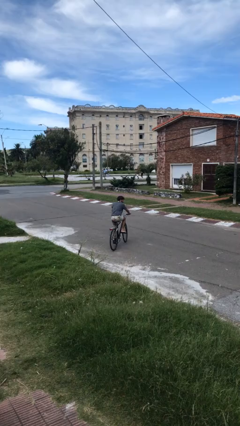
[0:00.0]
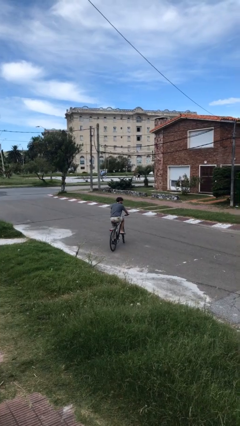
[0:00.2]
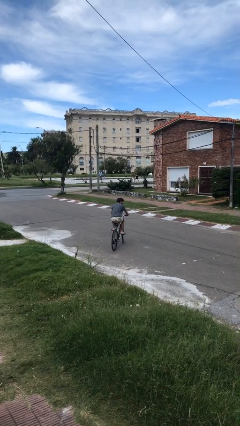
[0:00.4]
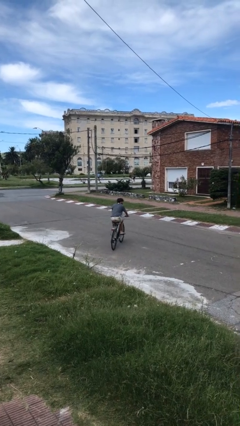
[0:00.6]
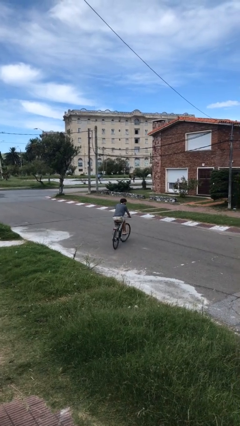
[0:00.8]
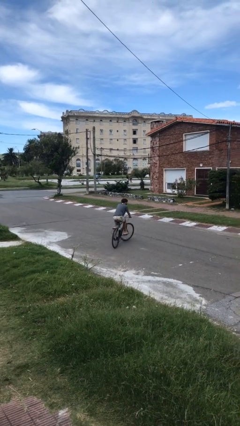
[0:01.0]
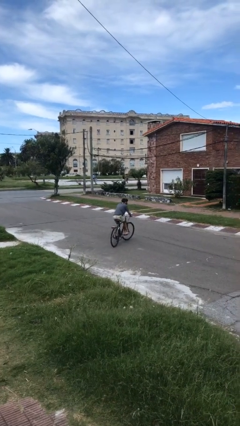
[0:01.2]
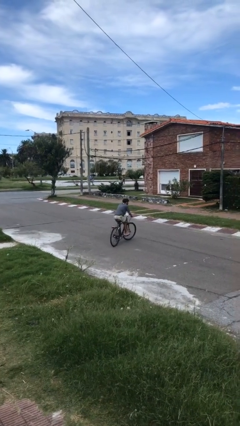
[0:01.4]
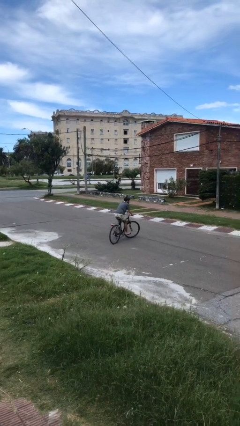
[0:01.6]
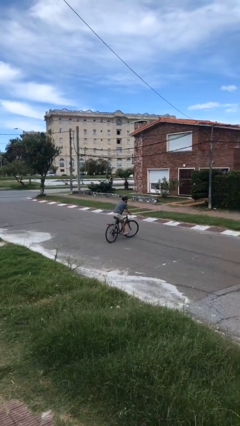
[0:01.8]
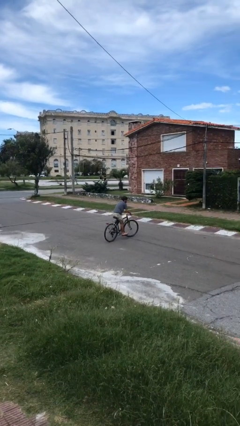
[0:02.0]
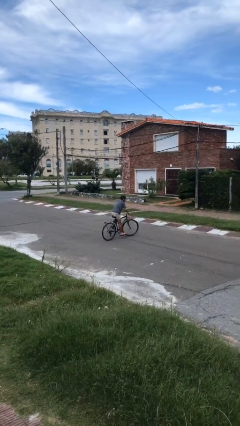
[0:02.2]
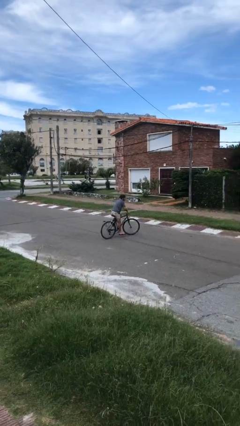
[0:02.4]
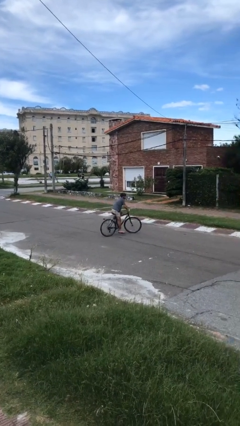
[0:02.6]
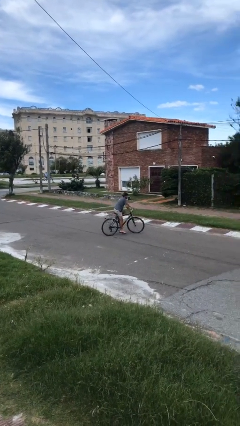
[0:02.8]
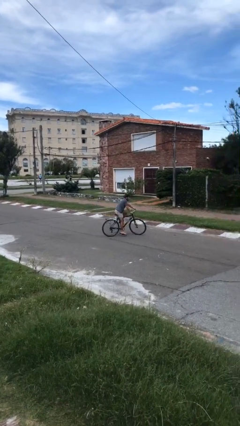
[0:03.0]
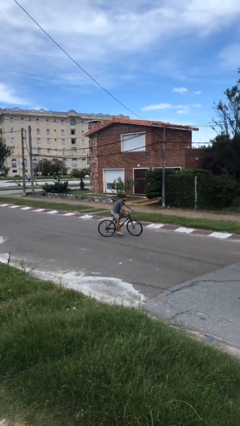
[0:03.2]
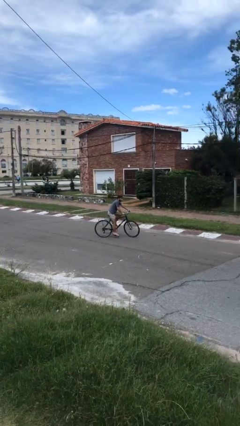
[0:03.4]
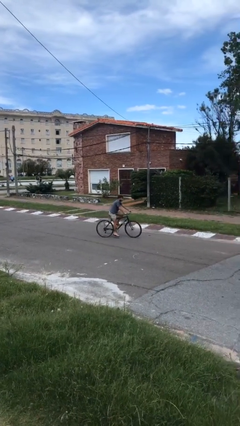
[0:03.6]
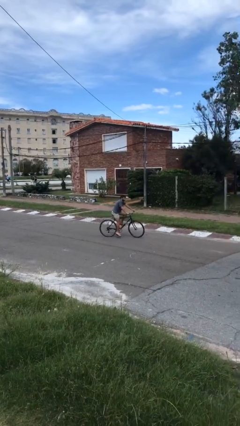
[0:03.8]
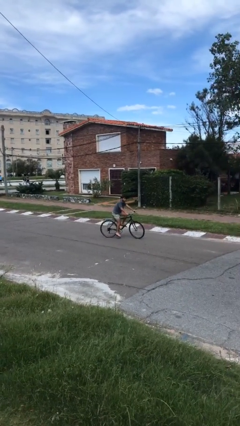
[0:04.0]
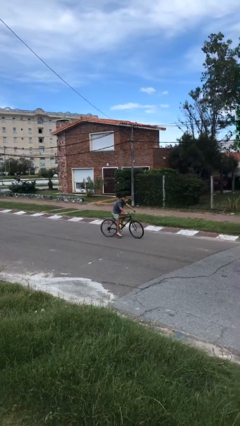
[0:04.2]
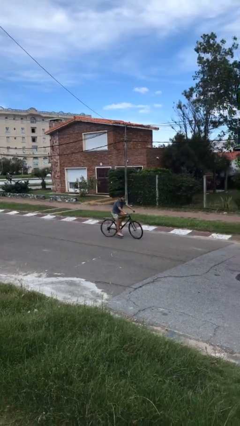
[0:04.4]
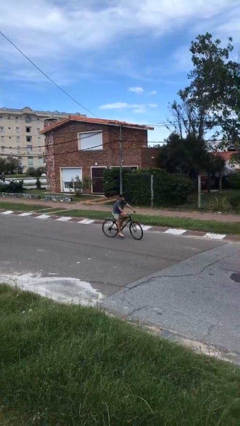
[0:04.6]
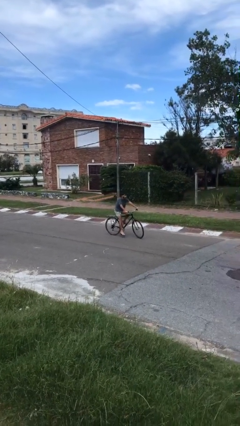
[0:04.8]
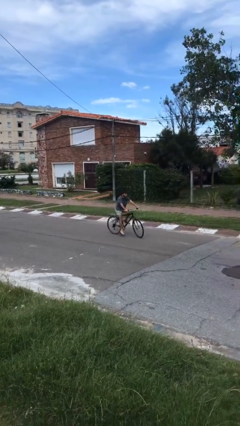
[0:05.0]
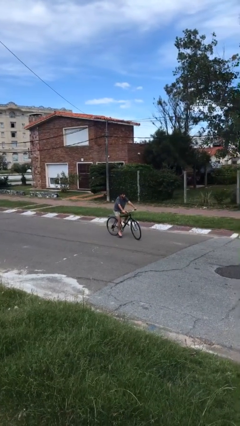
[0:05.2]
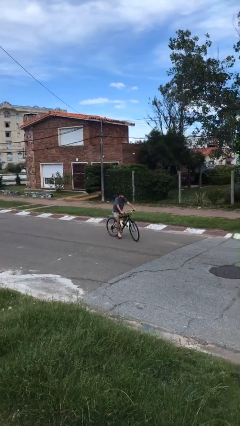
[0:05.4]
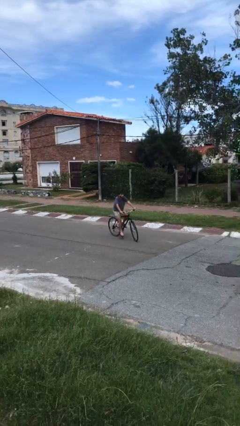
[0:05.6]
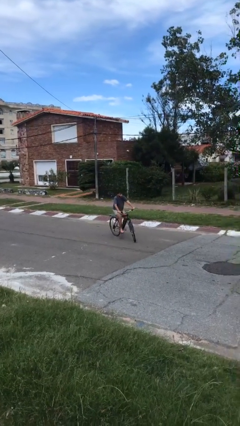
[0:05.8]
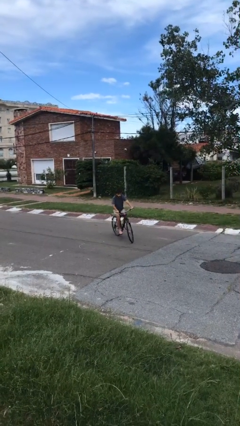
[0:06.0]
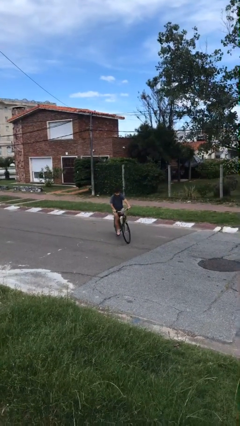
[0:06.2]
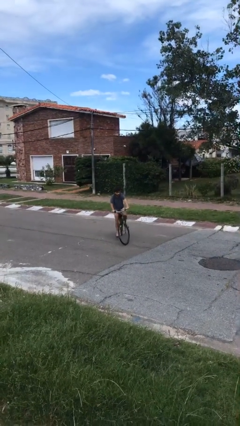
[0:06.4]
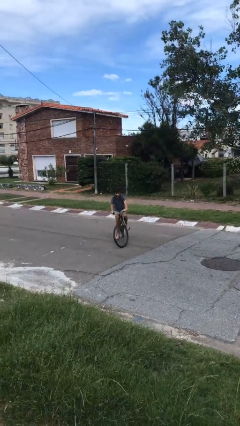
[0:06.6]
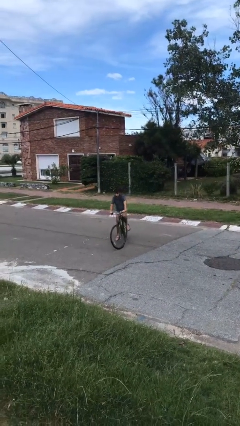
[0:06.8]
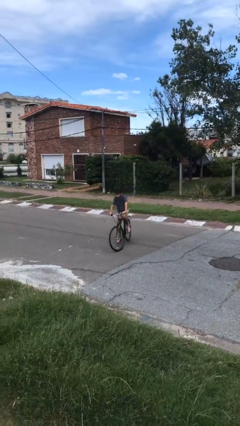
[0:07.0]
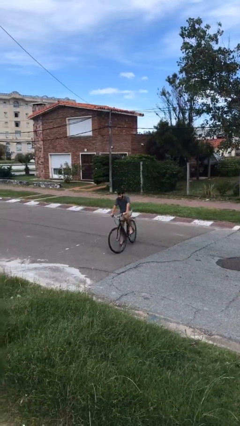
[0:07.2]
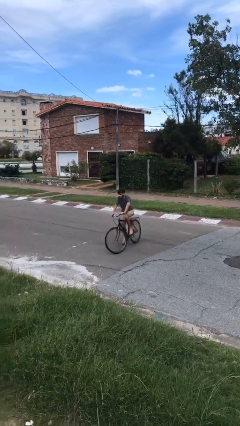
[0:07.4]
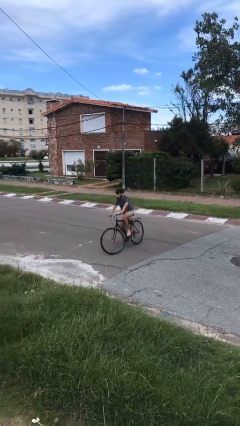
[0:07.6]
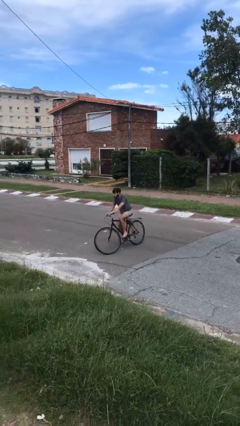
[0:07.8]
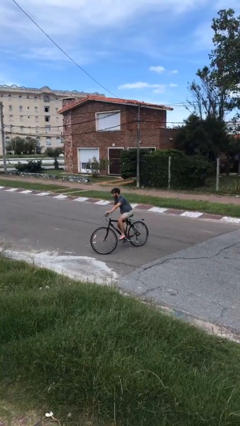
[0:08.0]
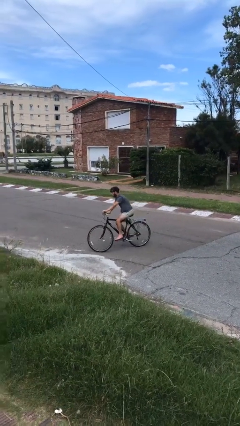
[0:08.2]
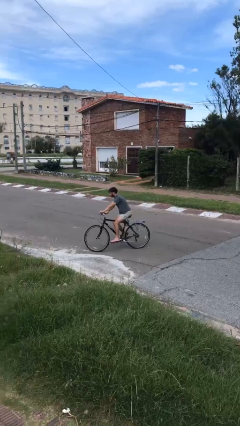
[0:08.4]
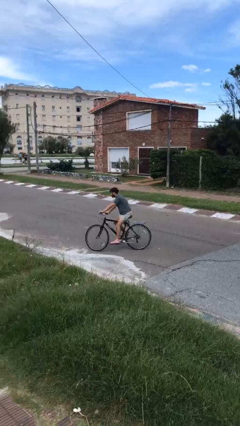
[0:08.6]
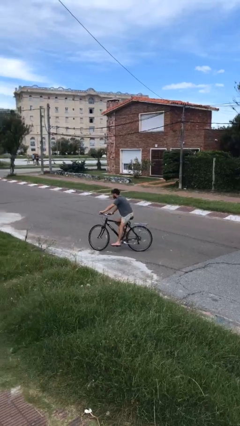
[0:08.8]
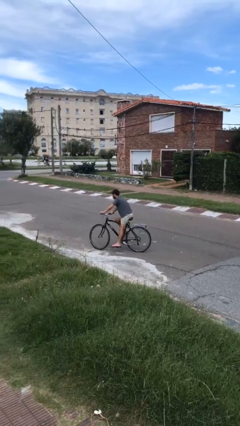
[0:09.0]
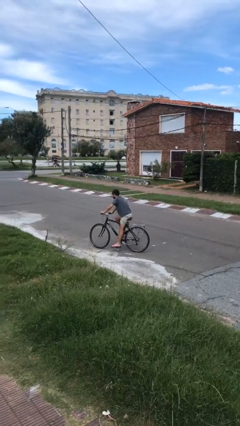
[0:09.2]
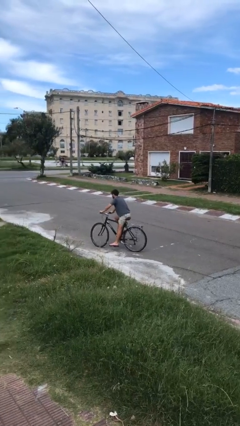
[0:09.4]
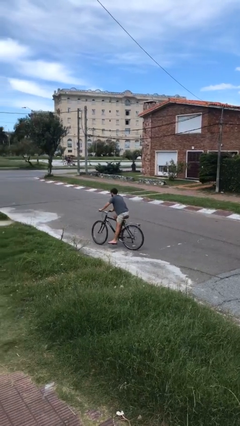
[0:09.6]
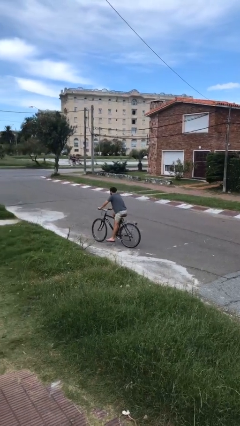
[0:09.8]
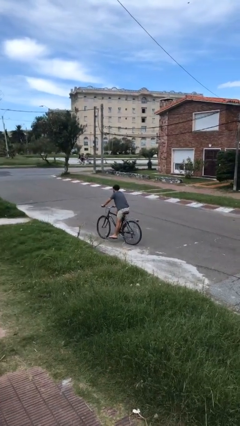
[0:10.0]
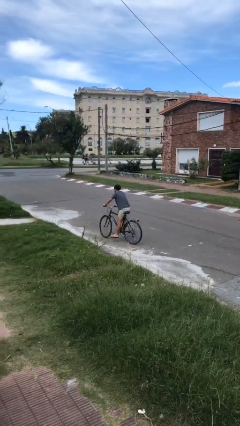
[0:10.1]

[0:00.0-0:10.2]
person rides bicycle

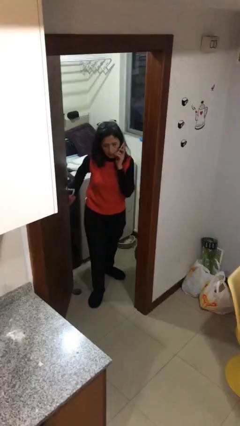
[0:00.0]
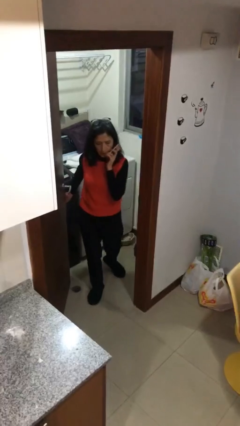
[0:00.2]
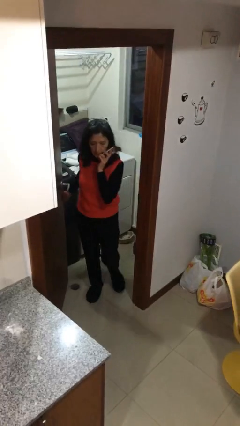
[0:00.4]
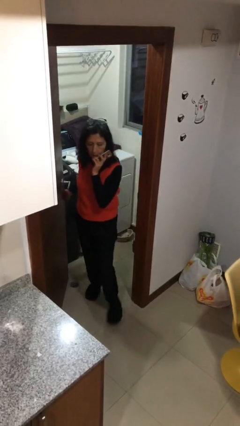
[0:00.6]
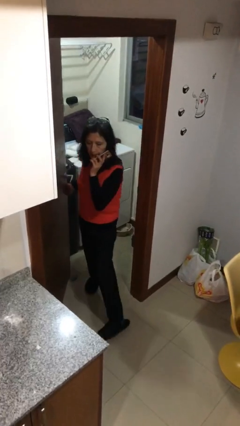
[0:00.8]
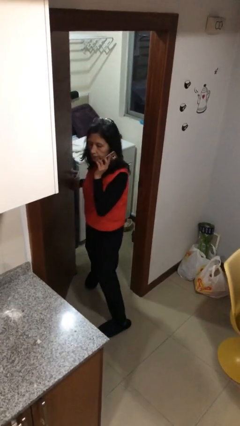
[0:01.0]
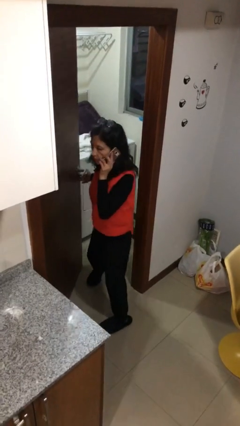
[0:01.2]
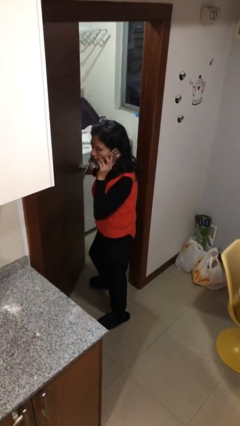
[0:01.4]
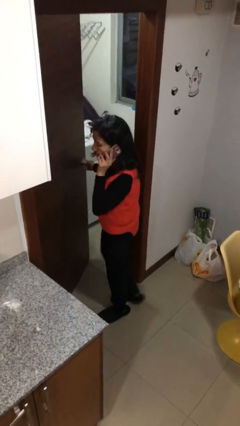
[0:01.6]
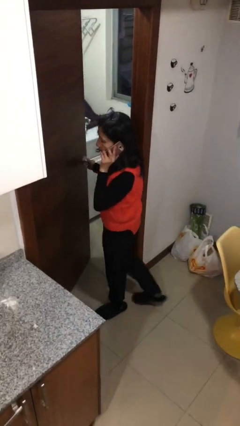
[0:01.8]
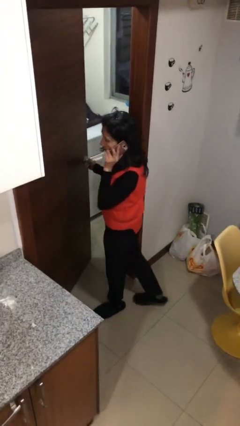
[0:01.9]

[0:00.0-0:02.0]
person enters scene through structure

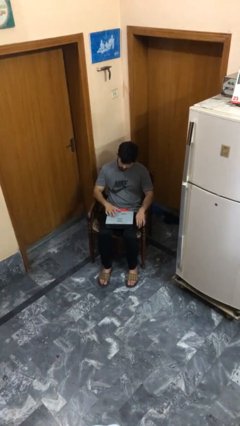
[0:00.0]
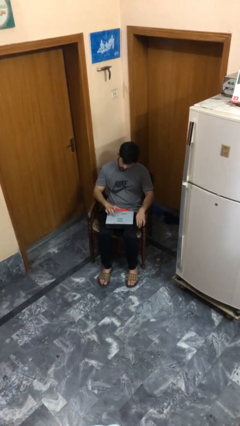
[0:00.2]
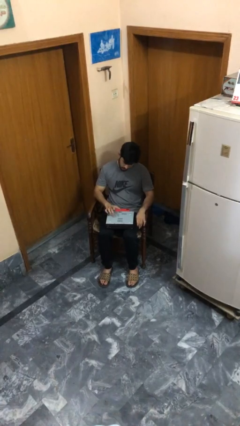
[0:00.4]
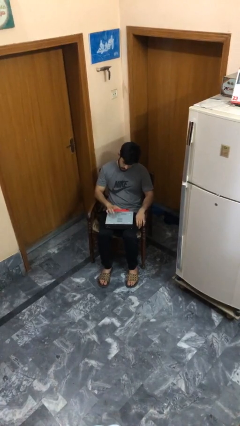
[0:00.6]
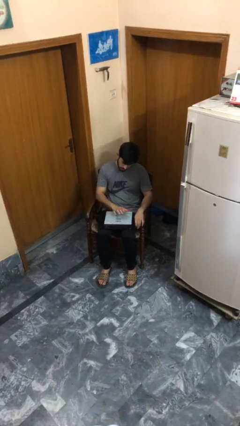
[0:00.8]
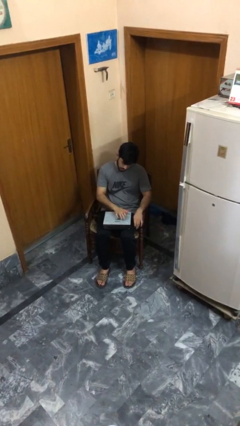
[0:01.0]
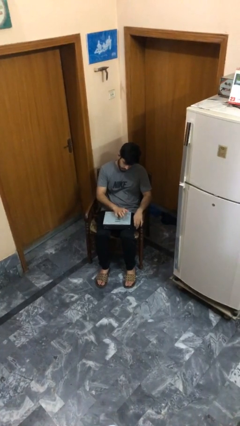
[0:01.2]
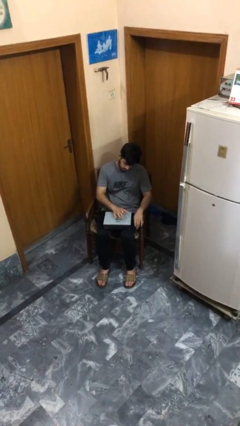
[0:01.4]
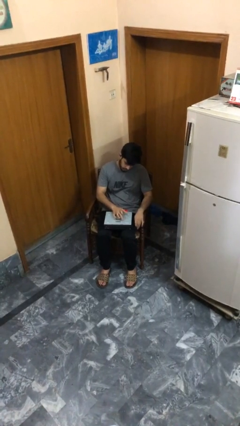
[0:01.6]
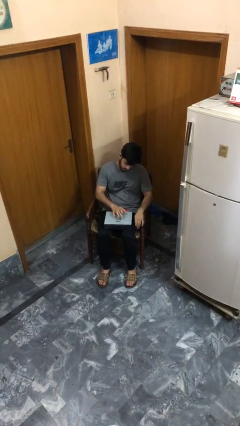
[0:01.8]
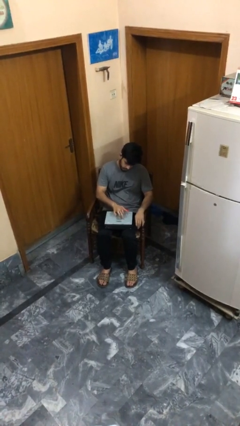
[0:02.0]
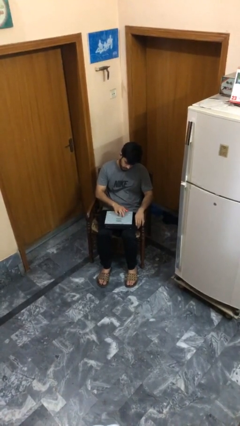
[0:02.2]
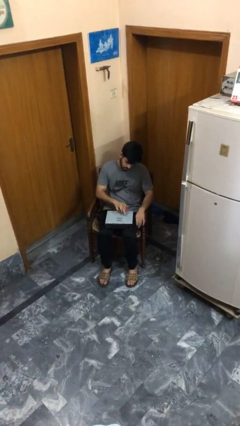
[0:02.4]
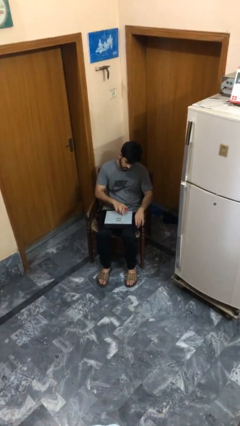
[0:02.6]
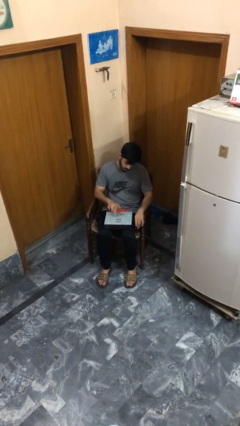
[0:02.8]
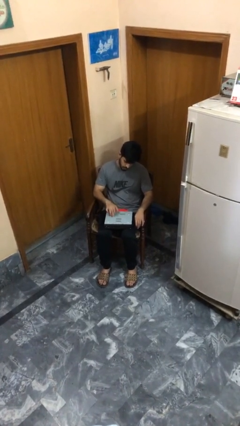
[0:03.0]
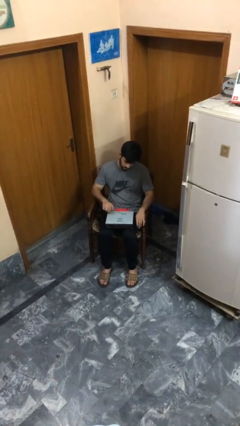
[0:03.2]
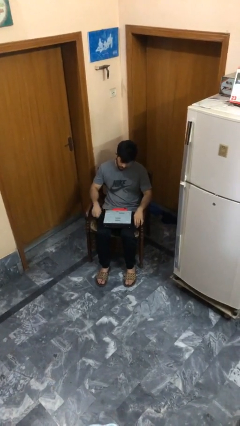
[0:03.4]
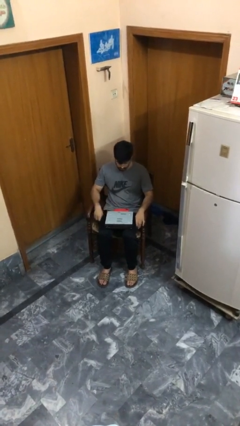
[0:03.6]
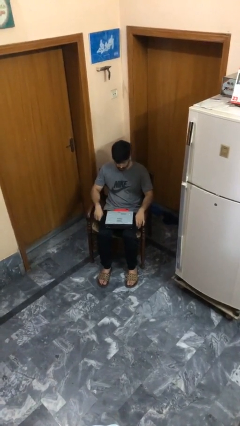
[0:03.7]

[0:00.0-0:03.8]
person taps object with finger

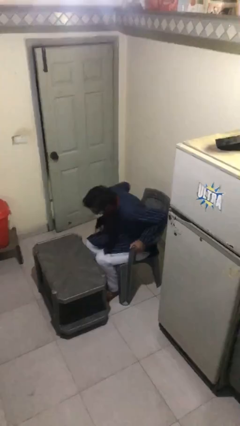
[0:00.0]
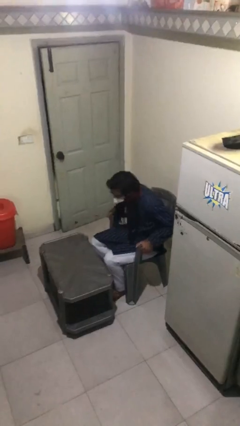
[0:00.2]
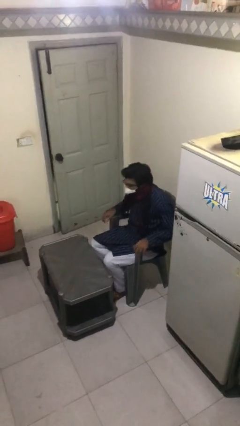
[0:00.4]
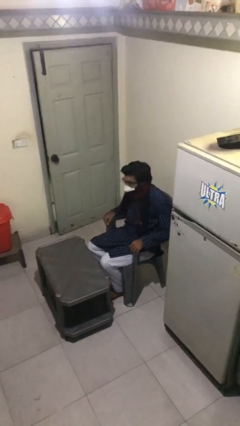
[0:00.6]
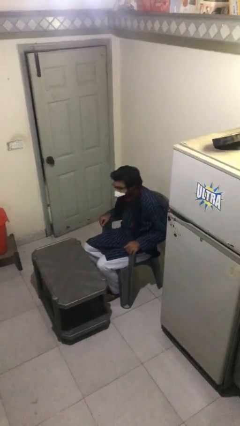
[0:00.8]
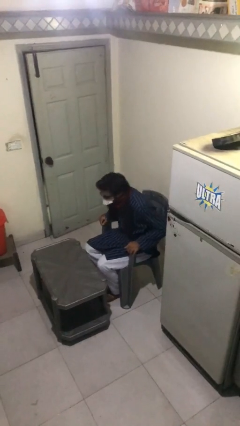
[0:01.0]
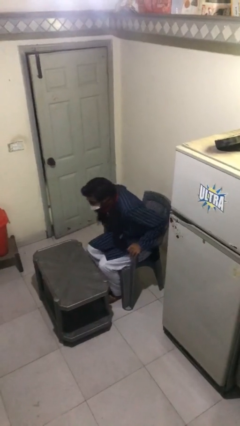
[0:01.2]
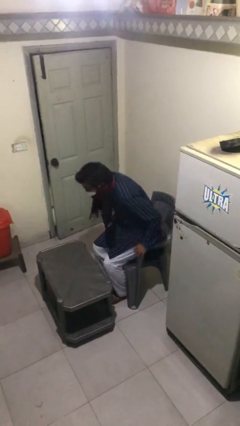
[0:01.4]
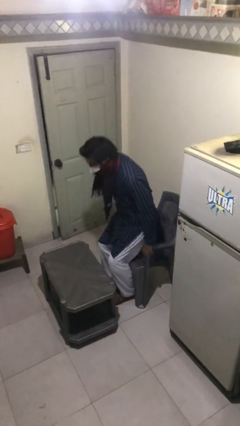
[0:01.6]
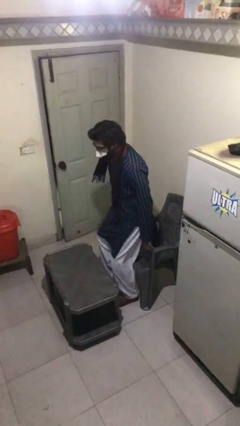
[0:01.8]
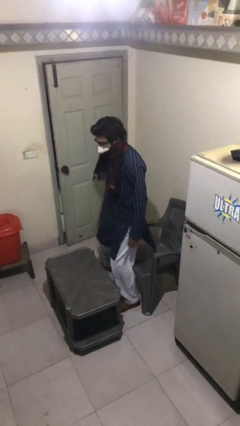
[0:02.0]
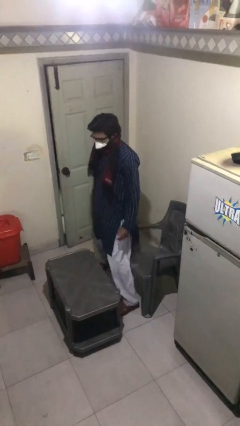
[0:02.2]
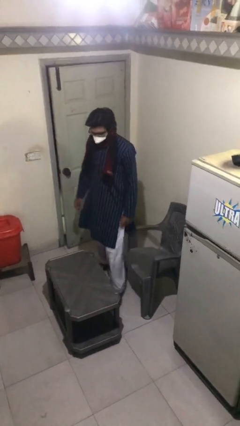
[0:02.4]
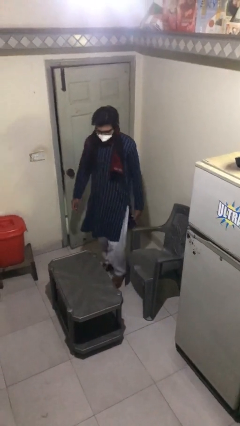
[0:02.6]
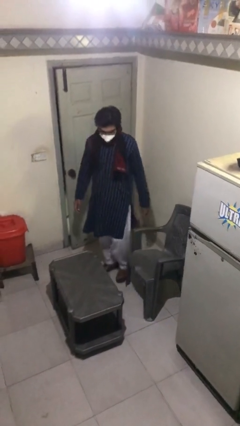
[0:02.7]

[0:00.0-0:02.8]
person stands up
